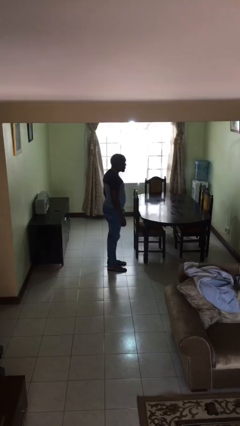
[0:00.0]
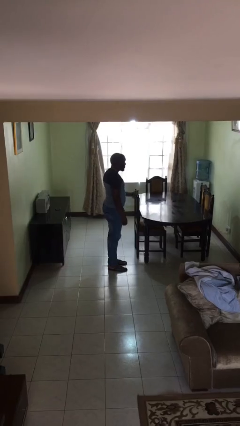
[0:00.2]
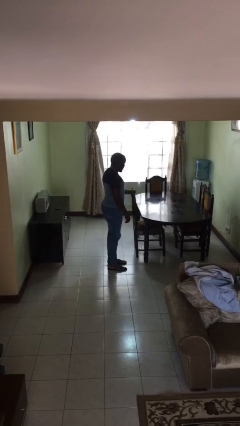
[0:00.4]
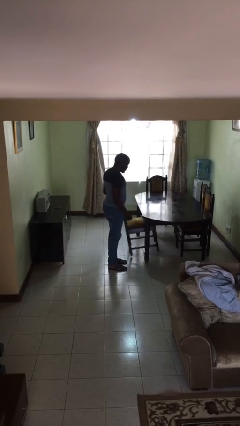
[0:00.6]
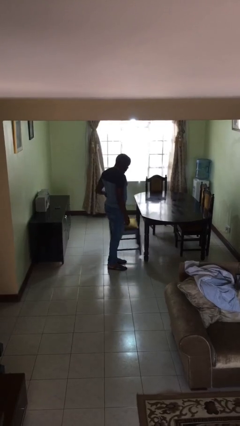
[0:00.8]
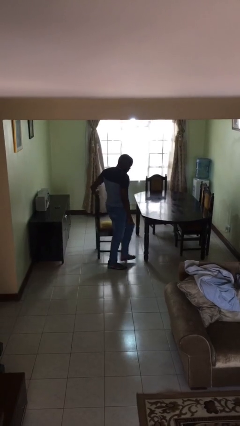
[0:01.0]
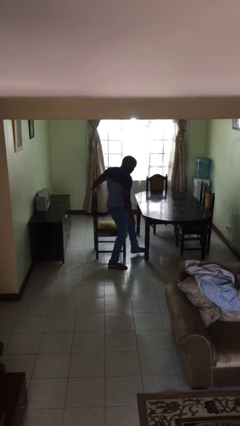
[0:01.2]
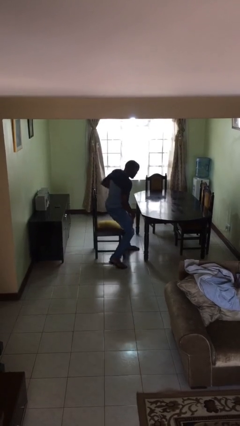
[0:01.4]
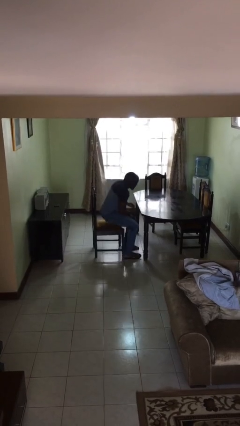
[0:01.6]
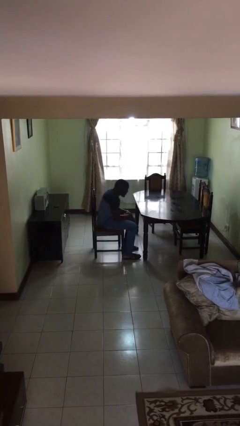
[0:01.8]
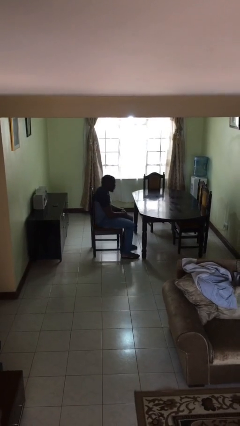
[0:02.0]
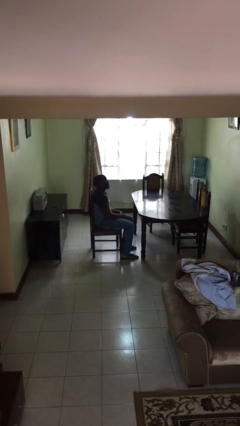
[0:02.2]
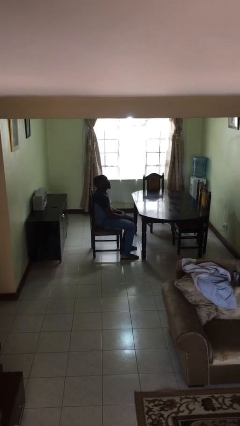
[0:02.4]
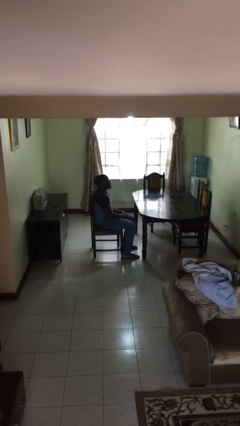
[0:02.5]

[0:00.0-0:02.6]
person sits down

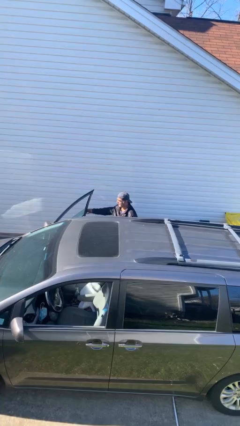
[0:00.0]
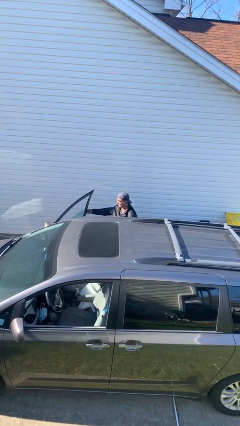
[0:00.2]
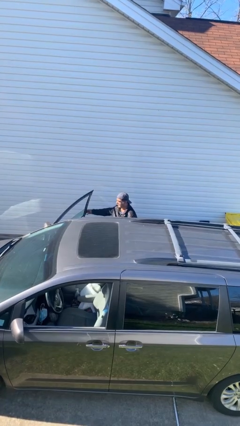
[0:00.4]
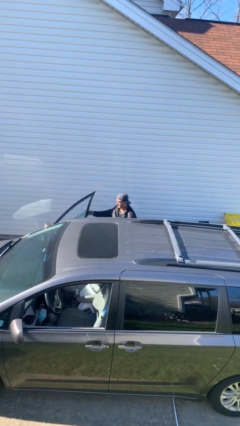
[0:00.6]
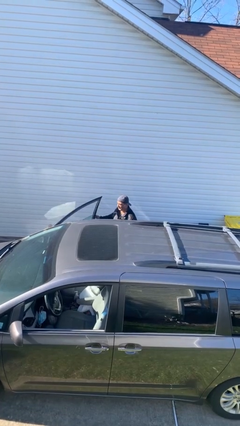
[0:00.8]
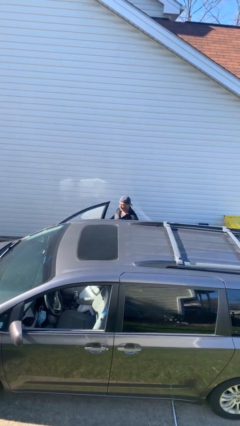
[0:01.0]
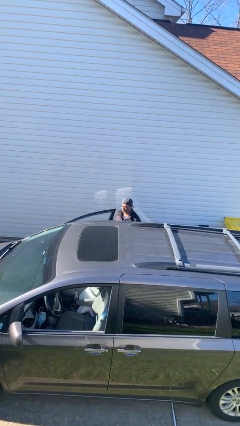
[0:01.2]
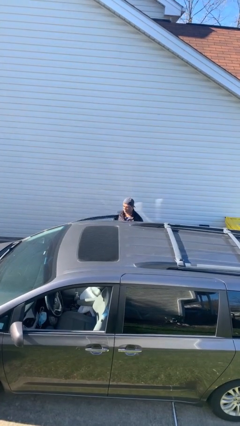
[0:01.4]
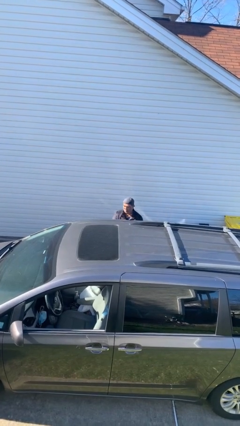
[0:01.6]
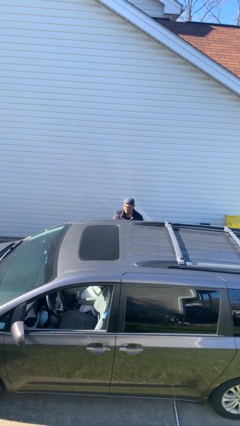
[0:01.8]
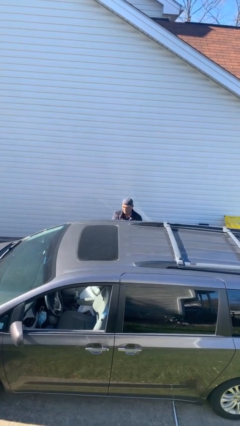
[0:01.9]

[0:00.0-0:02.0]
person closes car door

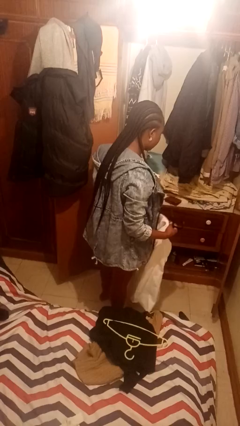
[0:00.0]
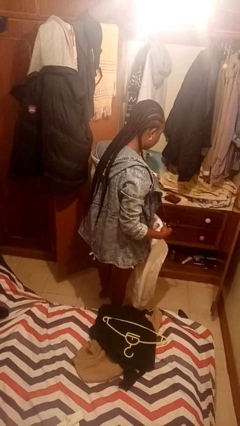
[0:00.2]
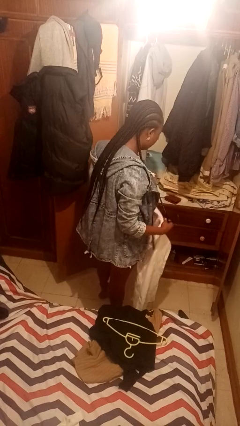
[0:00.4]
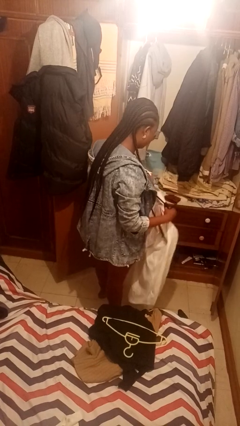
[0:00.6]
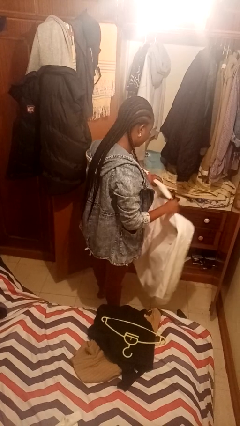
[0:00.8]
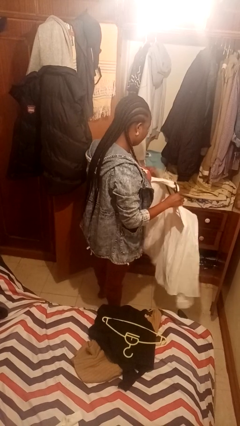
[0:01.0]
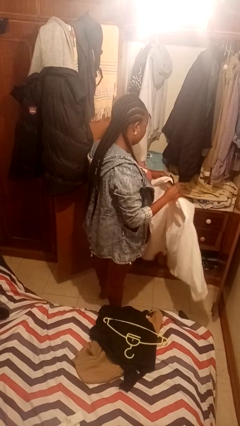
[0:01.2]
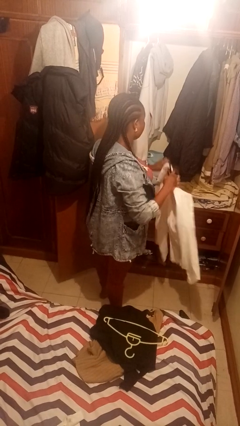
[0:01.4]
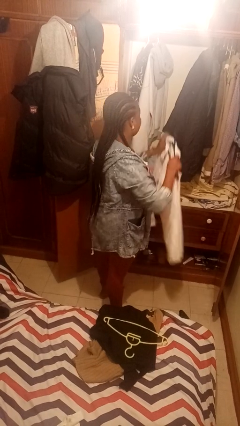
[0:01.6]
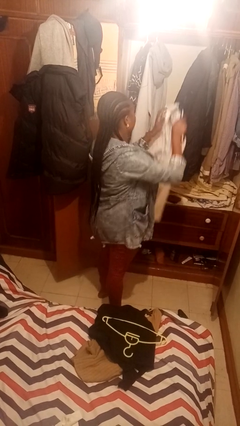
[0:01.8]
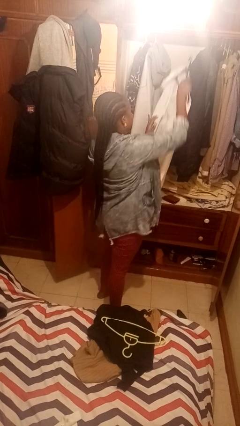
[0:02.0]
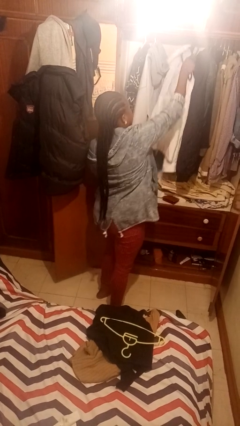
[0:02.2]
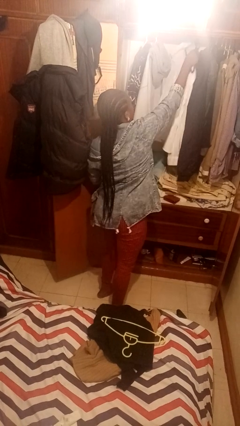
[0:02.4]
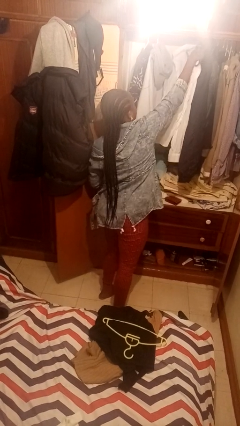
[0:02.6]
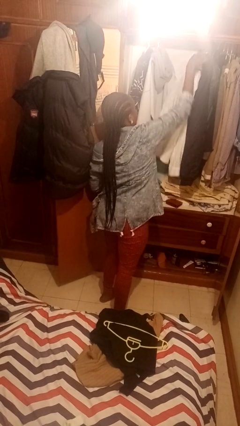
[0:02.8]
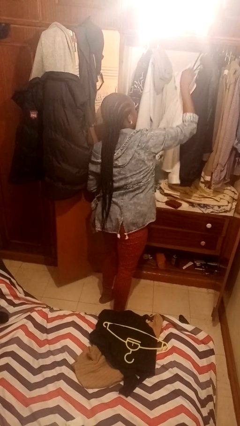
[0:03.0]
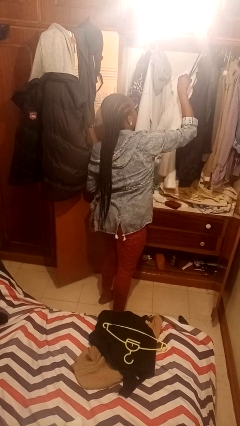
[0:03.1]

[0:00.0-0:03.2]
person puts clothes into closet

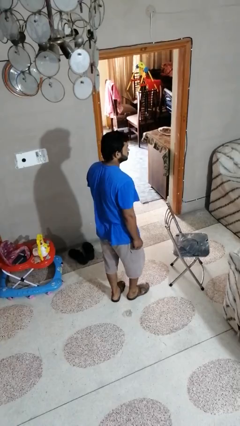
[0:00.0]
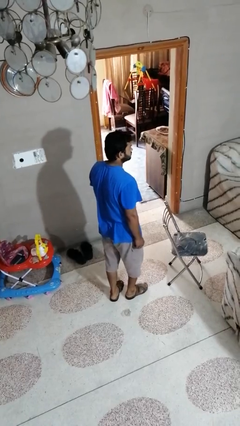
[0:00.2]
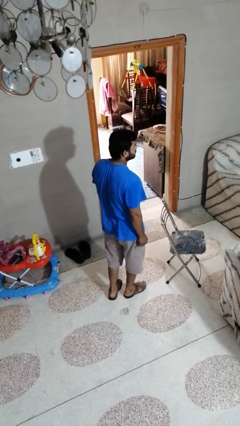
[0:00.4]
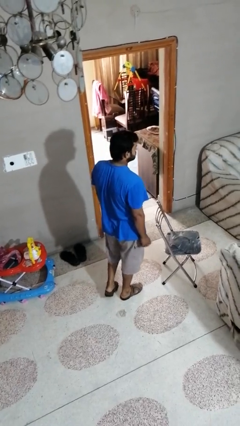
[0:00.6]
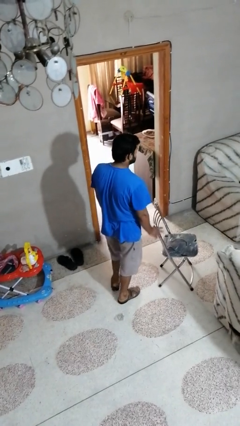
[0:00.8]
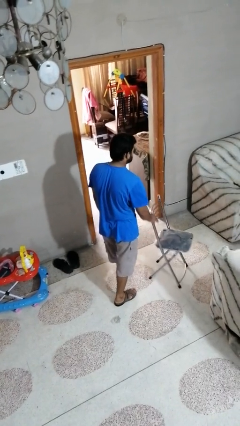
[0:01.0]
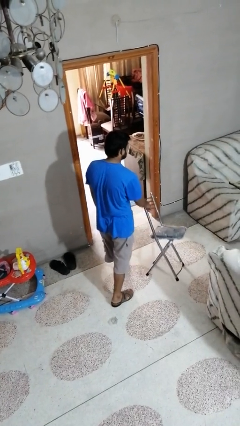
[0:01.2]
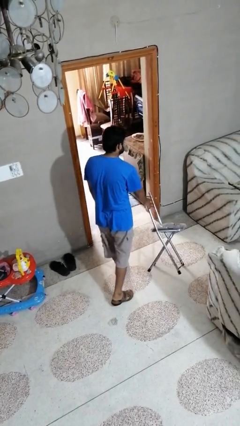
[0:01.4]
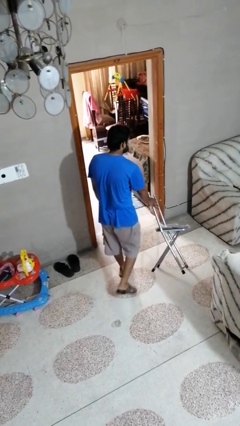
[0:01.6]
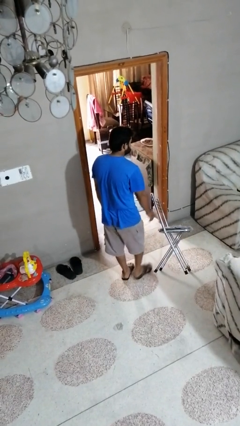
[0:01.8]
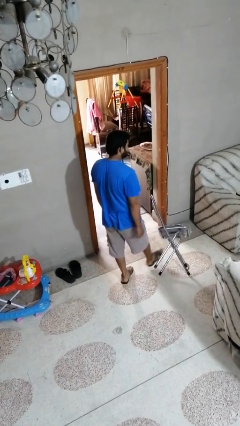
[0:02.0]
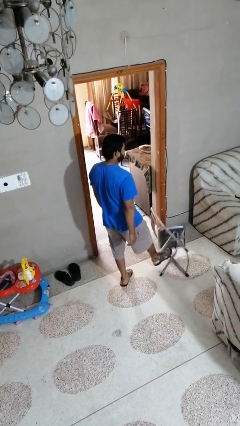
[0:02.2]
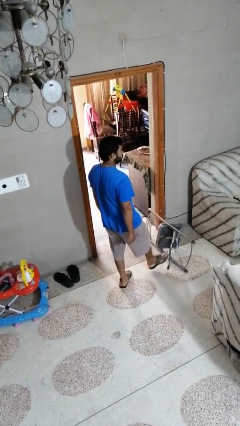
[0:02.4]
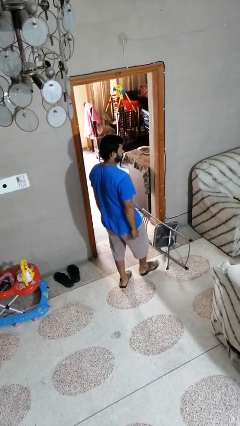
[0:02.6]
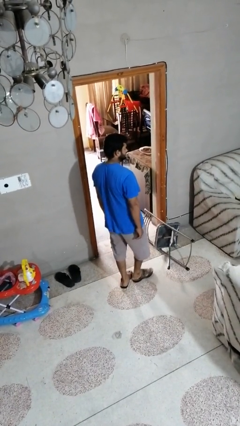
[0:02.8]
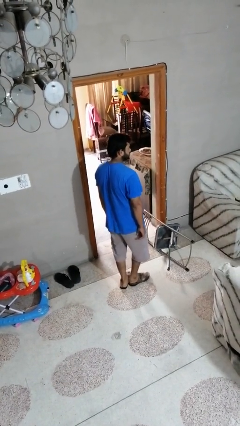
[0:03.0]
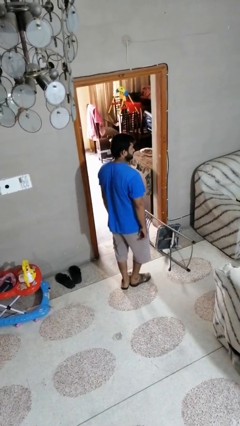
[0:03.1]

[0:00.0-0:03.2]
person knocks over furniture

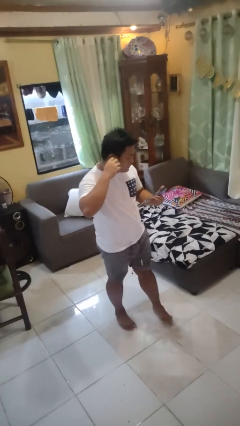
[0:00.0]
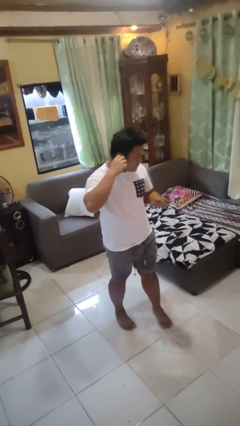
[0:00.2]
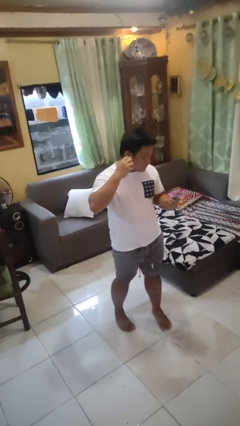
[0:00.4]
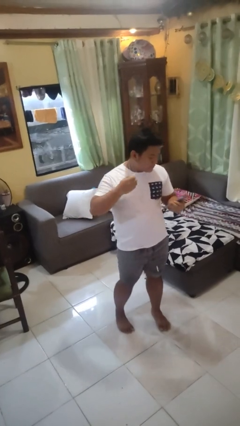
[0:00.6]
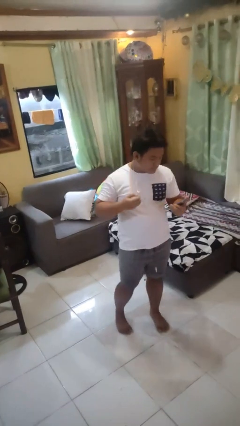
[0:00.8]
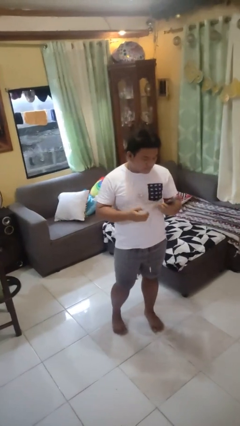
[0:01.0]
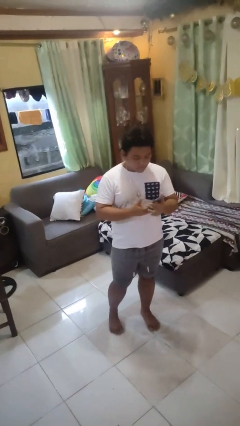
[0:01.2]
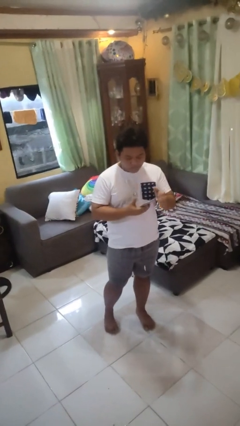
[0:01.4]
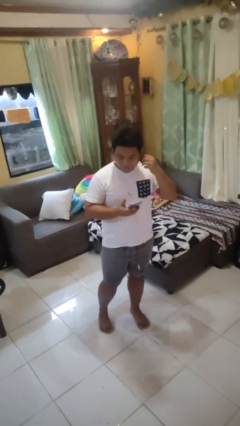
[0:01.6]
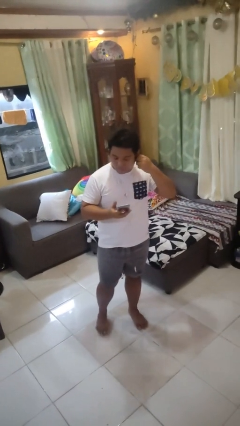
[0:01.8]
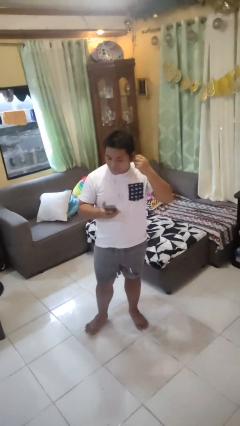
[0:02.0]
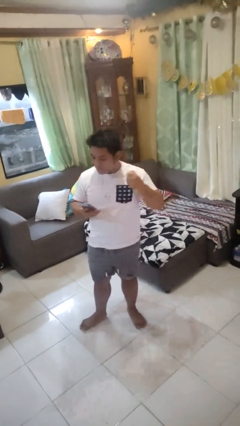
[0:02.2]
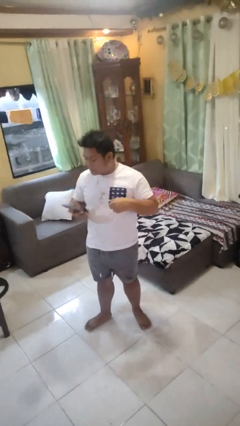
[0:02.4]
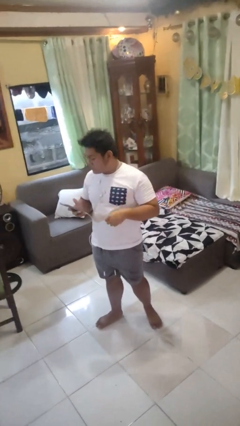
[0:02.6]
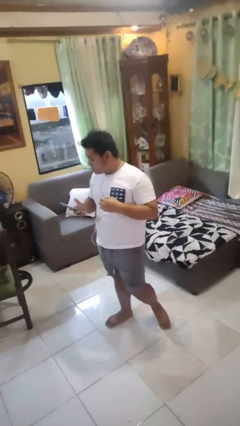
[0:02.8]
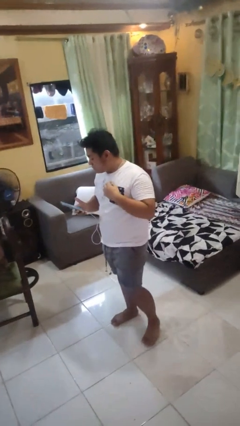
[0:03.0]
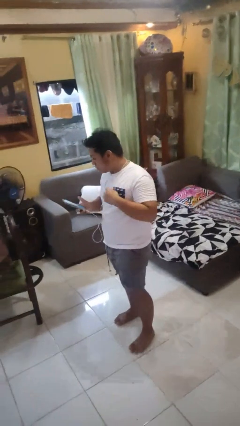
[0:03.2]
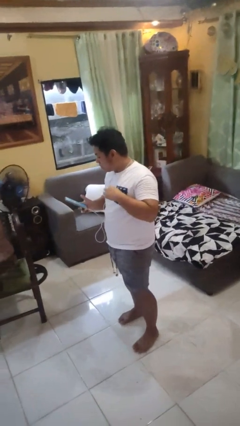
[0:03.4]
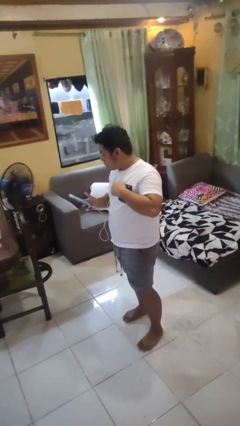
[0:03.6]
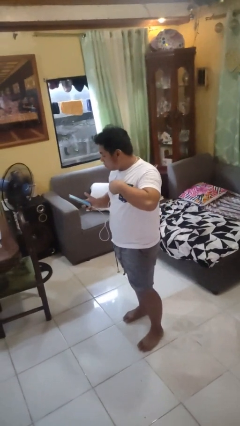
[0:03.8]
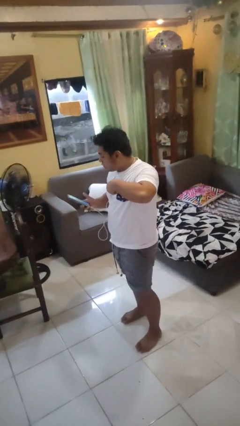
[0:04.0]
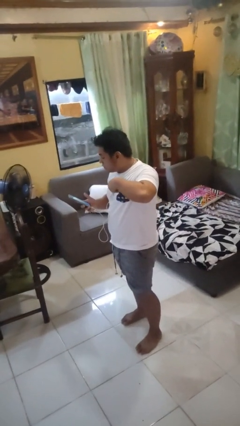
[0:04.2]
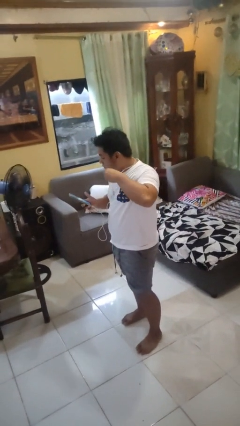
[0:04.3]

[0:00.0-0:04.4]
person takes off headphones

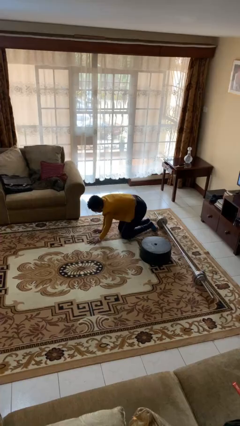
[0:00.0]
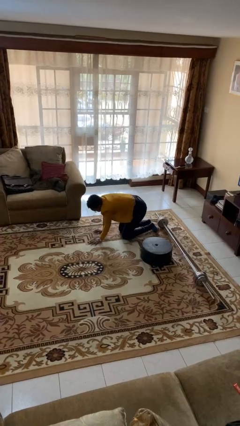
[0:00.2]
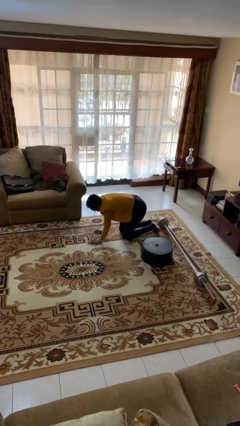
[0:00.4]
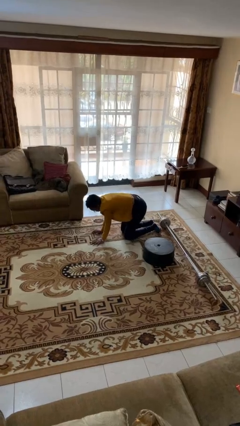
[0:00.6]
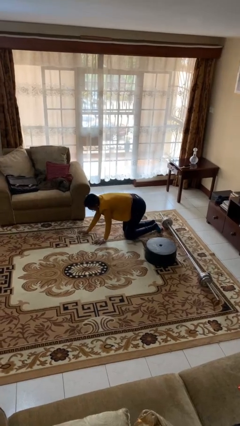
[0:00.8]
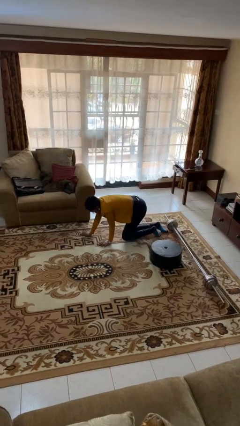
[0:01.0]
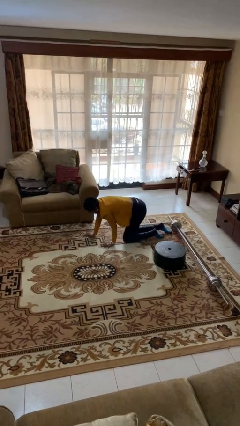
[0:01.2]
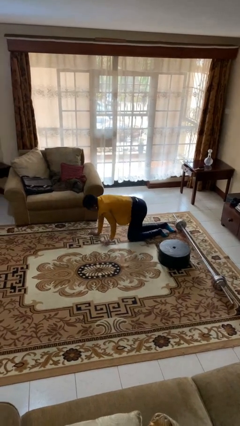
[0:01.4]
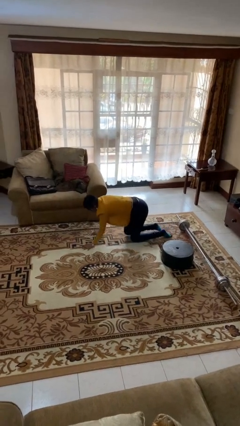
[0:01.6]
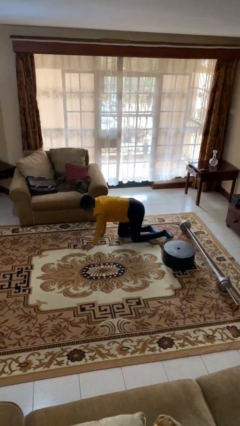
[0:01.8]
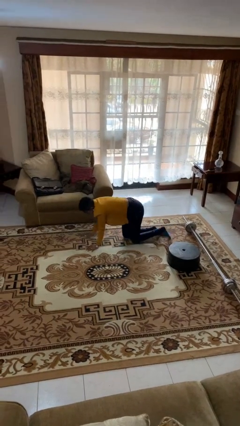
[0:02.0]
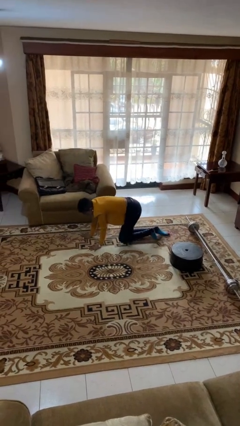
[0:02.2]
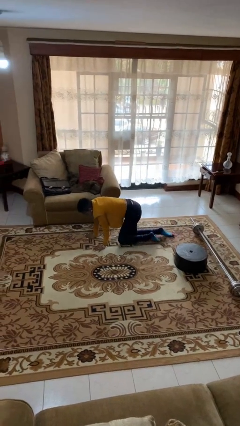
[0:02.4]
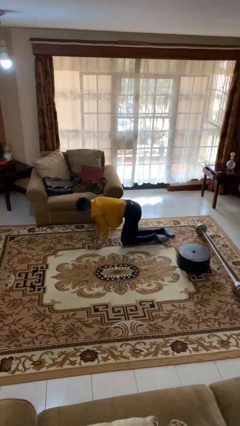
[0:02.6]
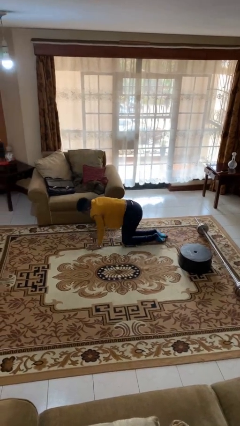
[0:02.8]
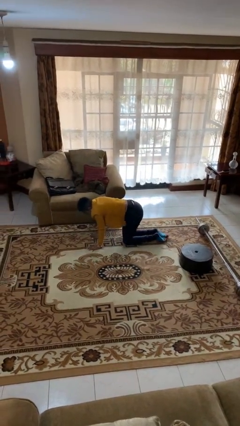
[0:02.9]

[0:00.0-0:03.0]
person crawls
